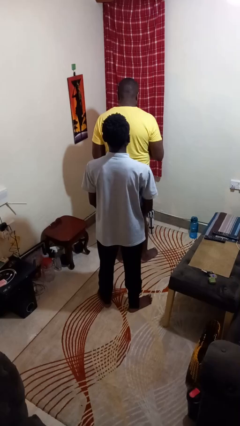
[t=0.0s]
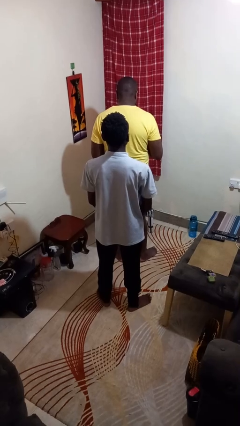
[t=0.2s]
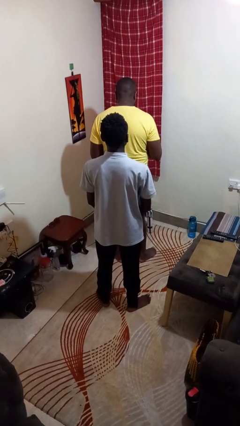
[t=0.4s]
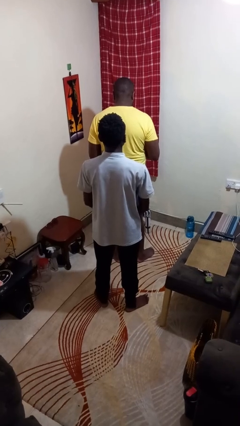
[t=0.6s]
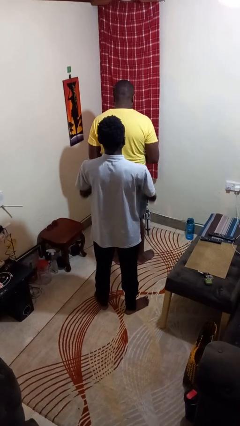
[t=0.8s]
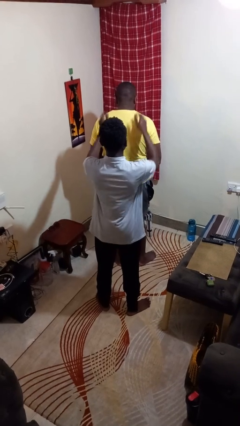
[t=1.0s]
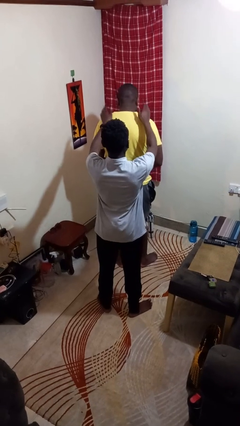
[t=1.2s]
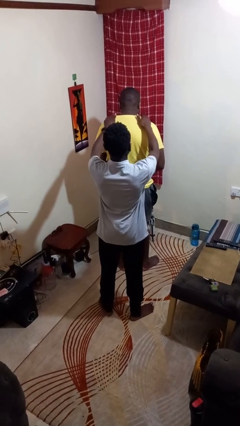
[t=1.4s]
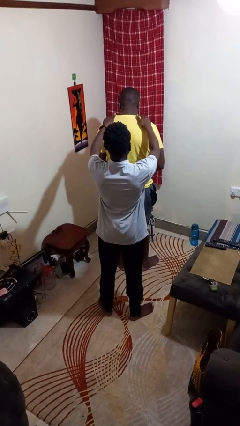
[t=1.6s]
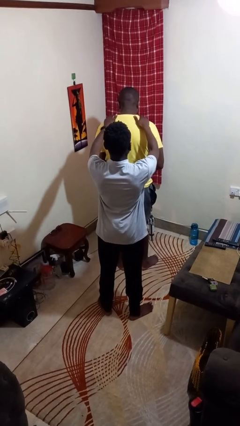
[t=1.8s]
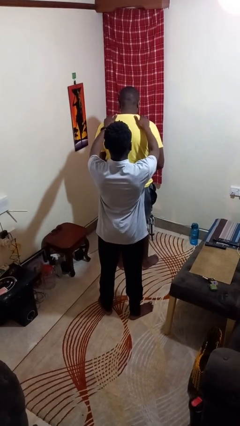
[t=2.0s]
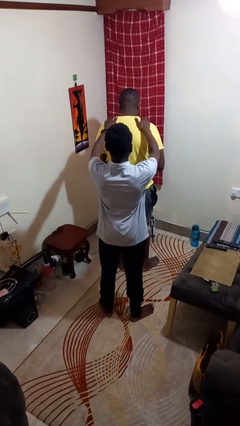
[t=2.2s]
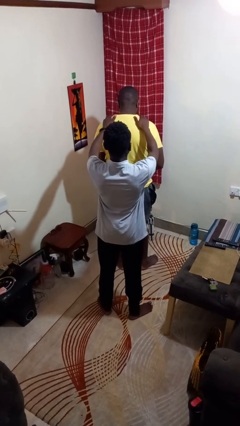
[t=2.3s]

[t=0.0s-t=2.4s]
person pounds shoulders of person

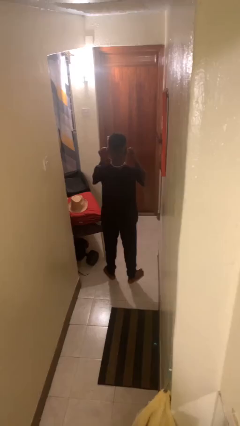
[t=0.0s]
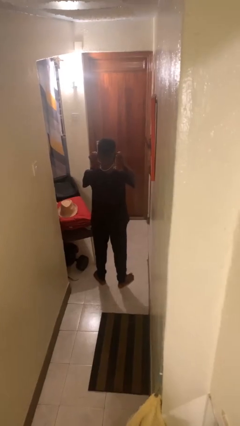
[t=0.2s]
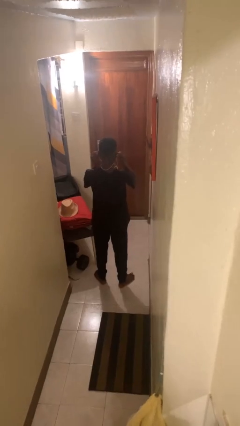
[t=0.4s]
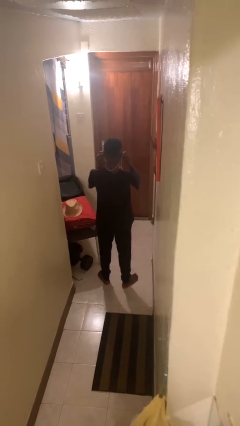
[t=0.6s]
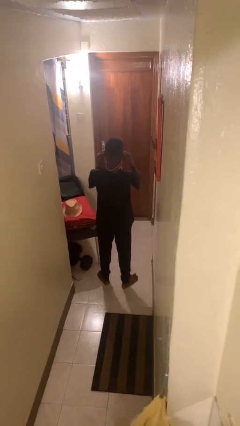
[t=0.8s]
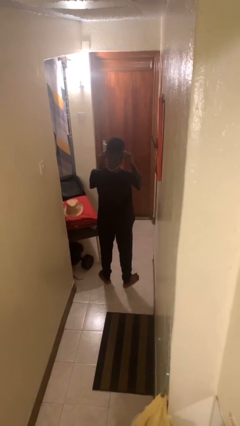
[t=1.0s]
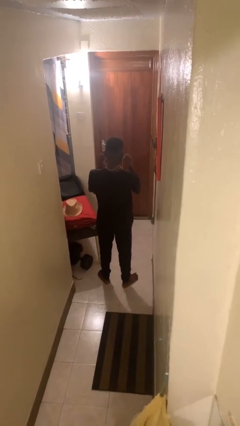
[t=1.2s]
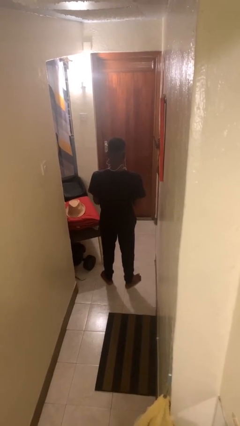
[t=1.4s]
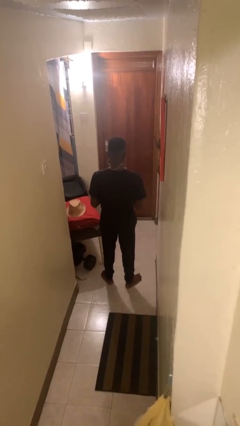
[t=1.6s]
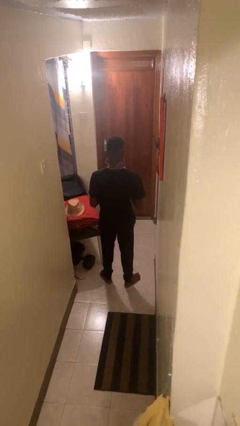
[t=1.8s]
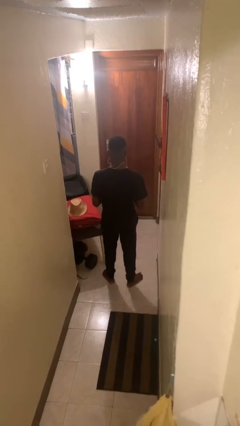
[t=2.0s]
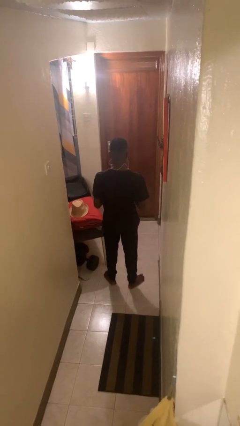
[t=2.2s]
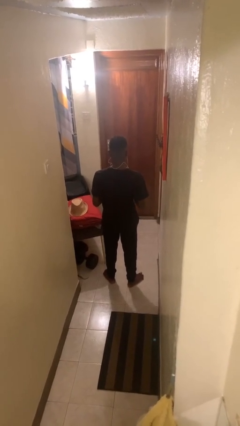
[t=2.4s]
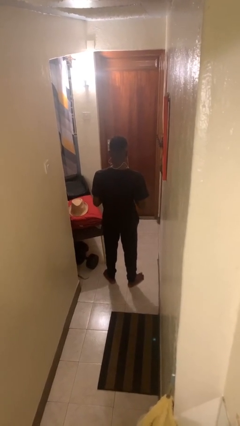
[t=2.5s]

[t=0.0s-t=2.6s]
person puts on headphones

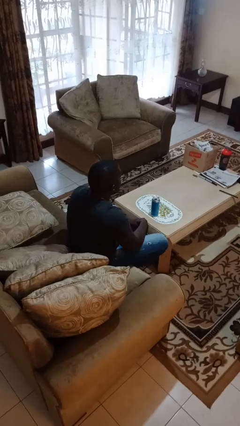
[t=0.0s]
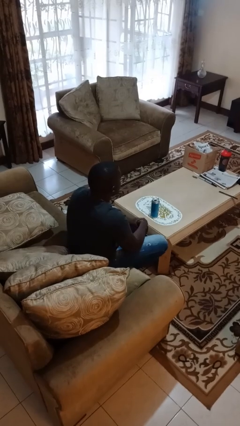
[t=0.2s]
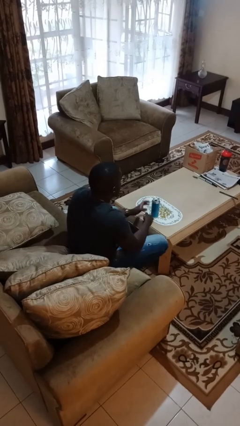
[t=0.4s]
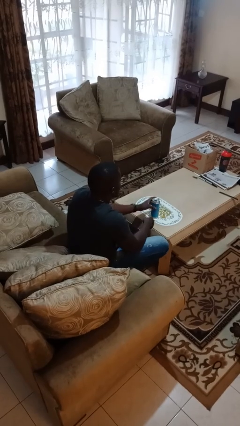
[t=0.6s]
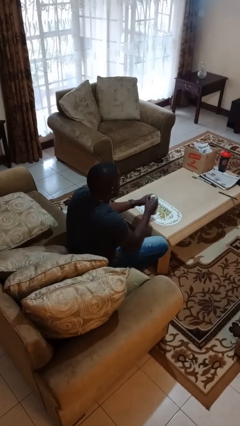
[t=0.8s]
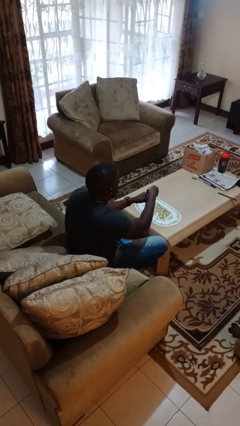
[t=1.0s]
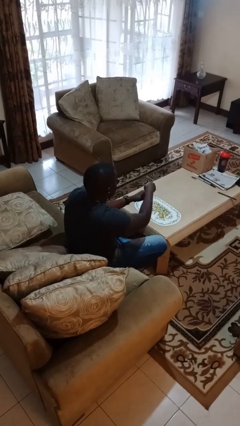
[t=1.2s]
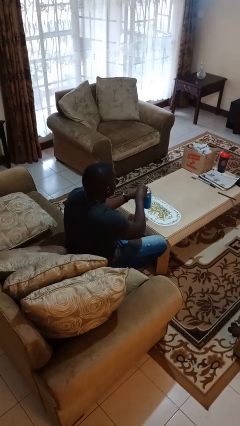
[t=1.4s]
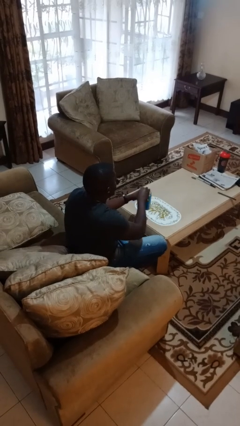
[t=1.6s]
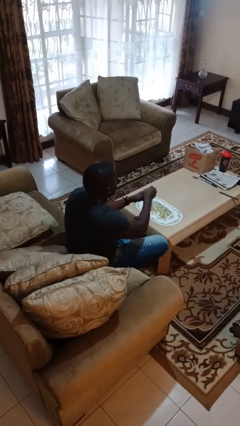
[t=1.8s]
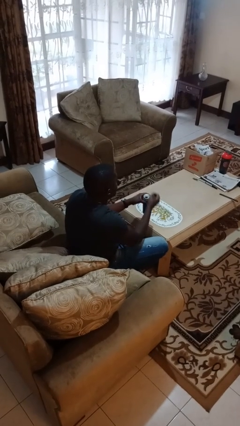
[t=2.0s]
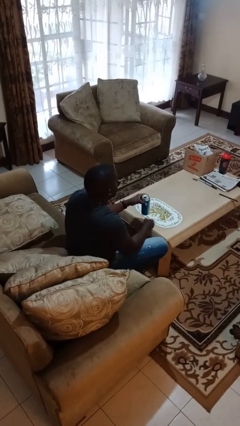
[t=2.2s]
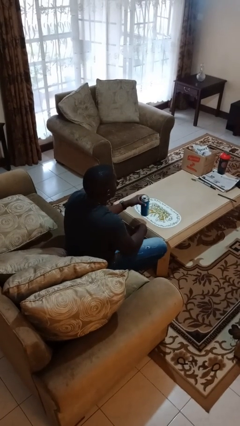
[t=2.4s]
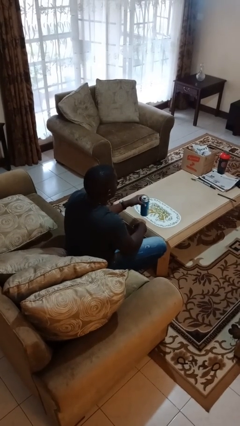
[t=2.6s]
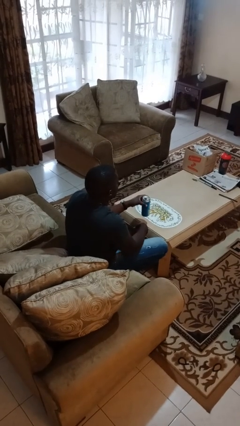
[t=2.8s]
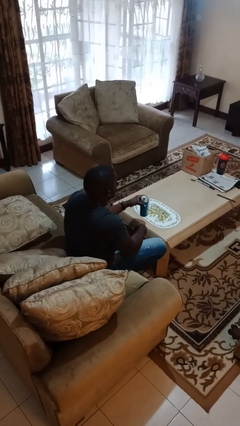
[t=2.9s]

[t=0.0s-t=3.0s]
person opens beverage can

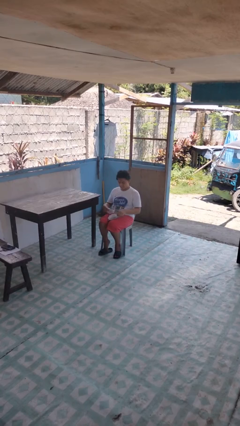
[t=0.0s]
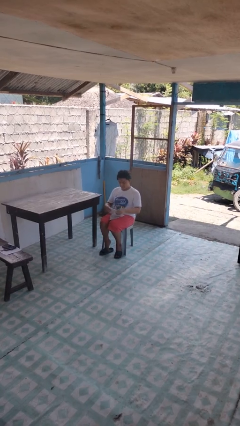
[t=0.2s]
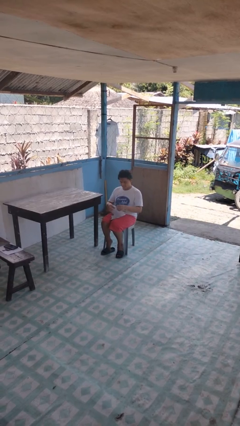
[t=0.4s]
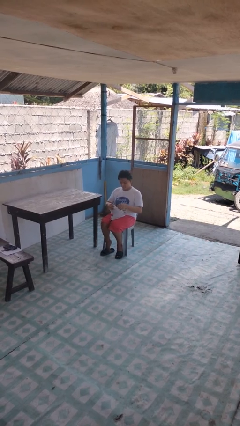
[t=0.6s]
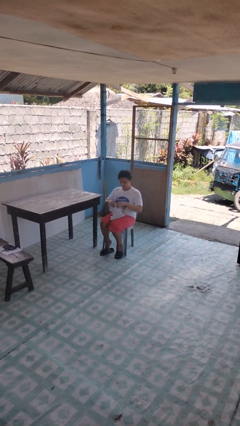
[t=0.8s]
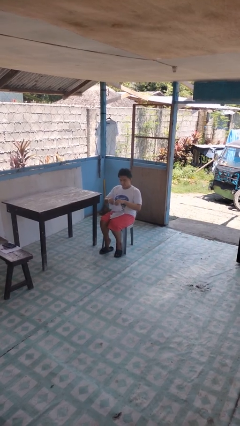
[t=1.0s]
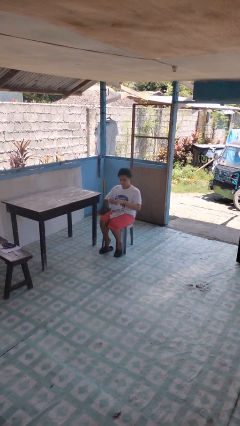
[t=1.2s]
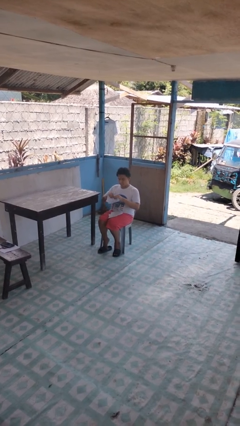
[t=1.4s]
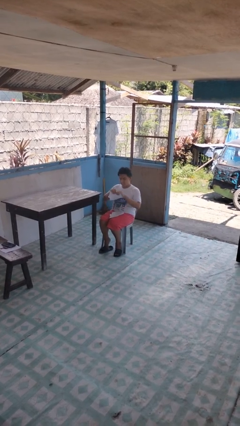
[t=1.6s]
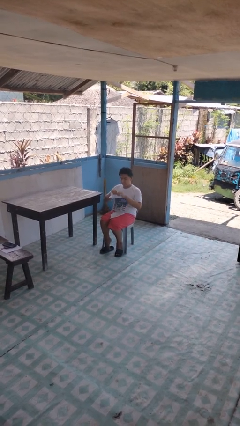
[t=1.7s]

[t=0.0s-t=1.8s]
person tears paper

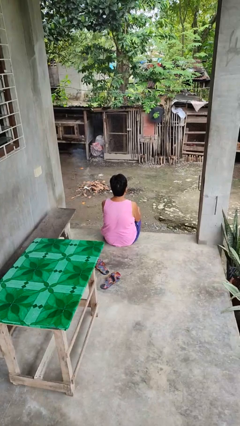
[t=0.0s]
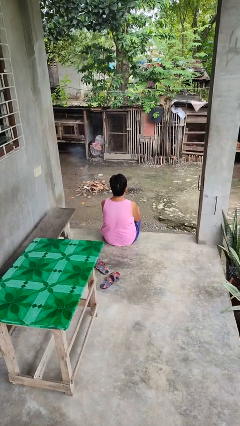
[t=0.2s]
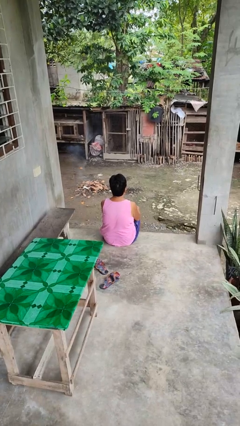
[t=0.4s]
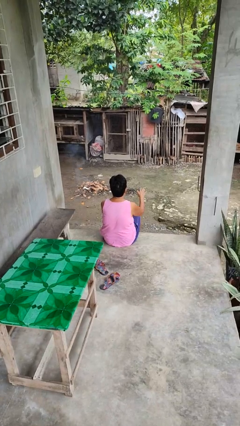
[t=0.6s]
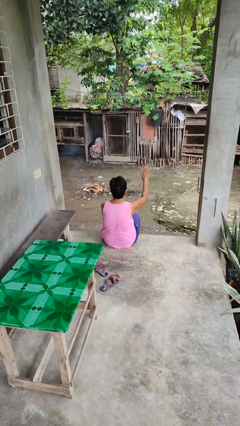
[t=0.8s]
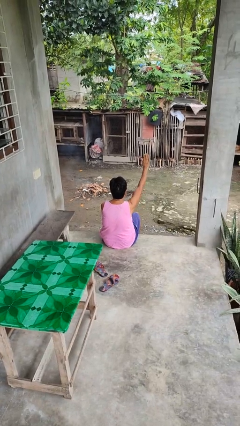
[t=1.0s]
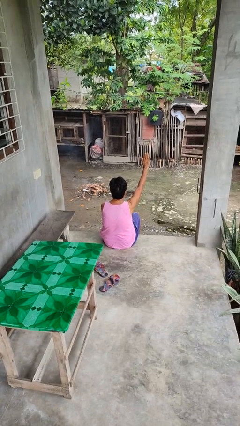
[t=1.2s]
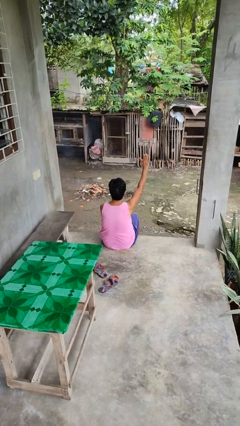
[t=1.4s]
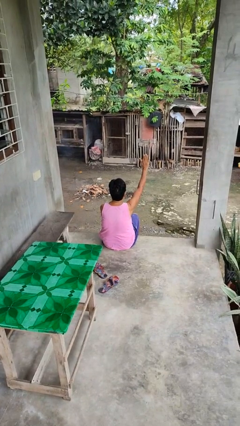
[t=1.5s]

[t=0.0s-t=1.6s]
person gestures raise hand

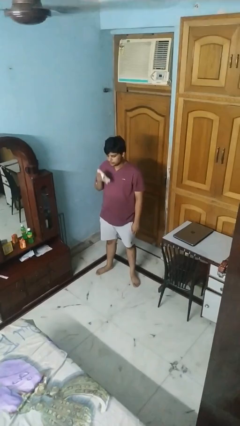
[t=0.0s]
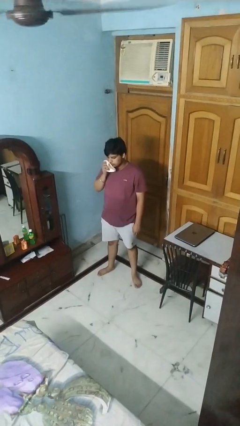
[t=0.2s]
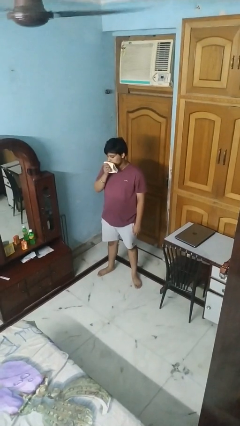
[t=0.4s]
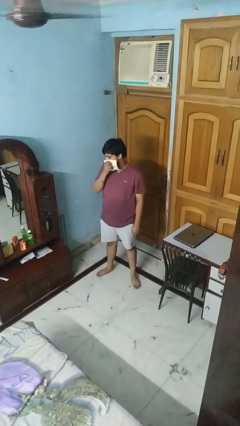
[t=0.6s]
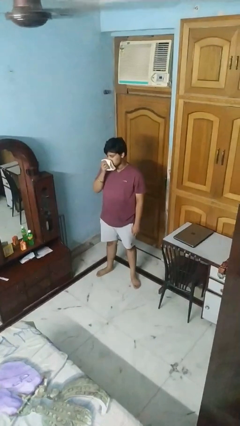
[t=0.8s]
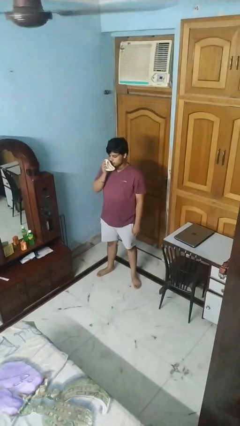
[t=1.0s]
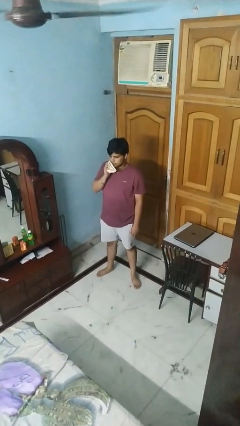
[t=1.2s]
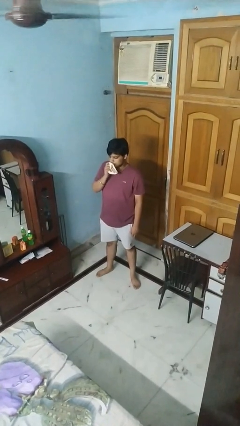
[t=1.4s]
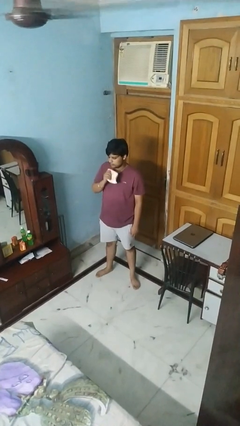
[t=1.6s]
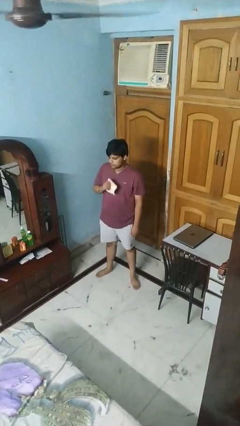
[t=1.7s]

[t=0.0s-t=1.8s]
person wipes mouth with napkin

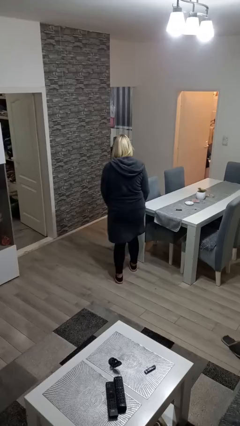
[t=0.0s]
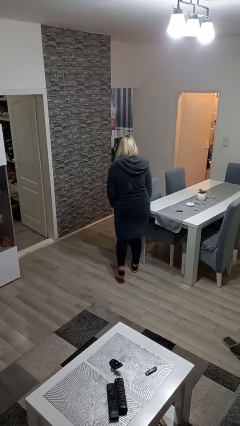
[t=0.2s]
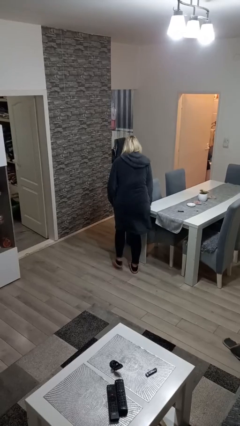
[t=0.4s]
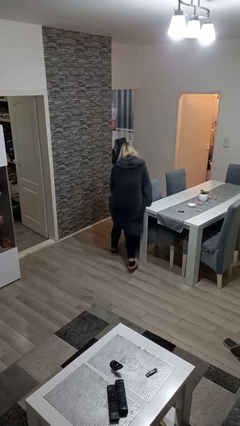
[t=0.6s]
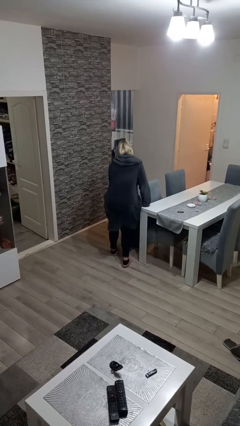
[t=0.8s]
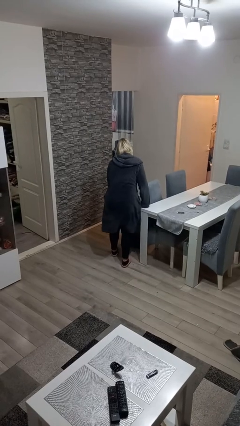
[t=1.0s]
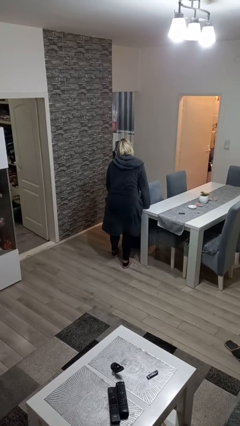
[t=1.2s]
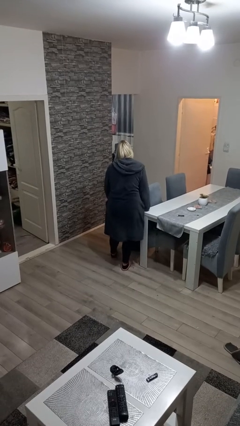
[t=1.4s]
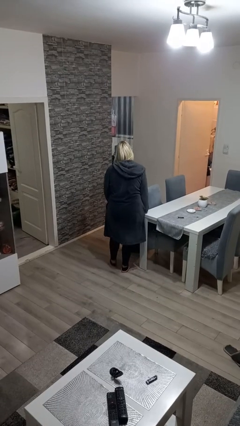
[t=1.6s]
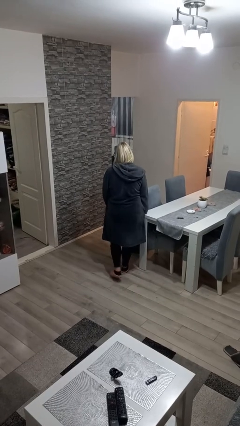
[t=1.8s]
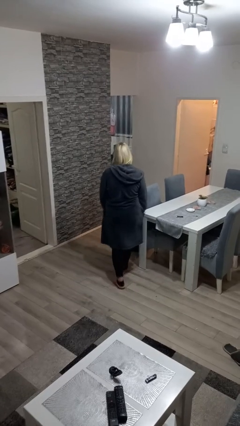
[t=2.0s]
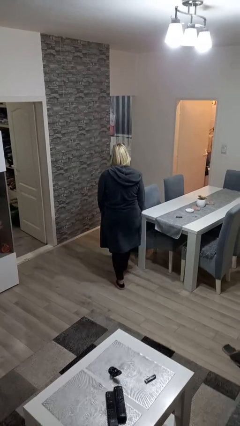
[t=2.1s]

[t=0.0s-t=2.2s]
person bumps into table

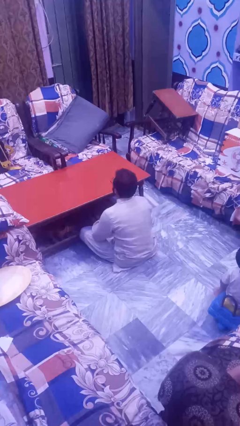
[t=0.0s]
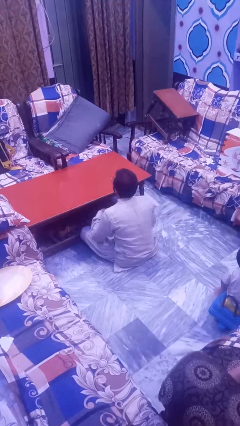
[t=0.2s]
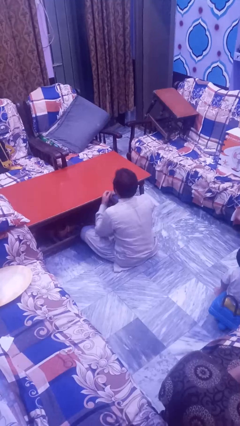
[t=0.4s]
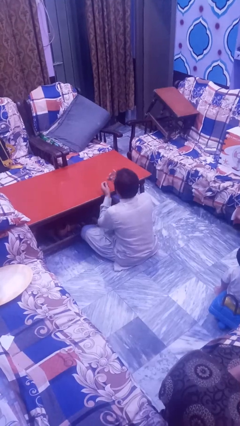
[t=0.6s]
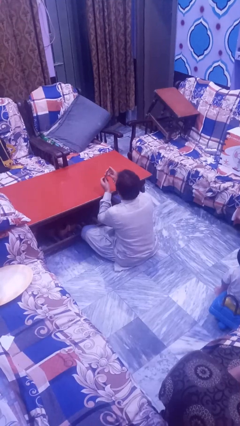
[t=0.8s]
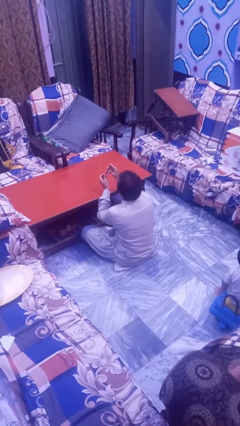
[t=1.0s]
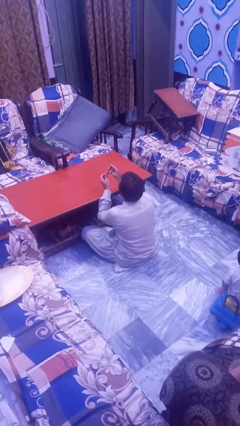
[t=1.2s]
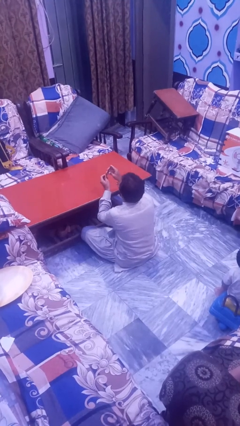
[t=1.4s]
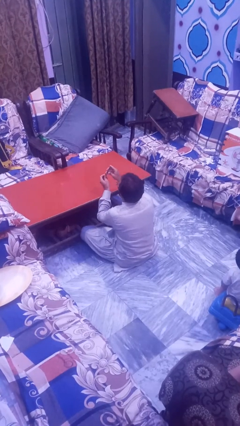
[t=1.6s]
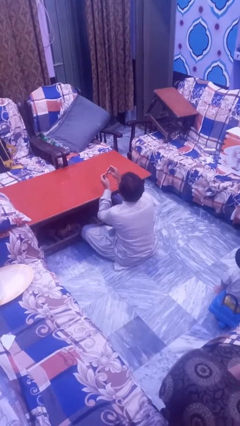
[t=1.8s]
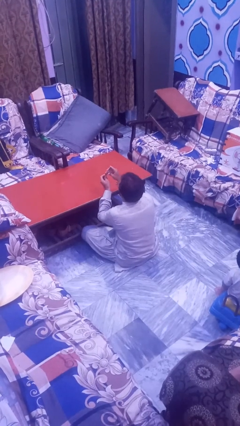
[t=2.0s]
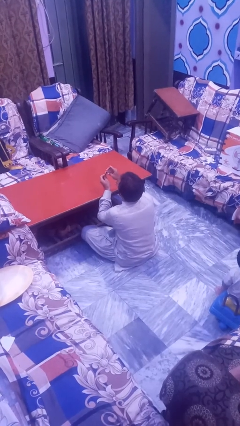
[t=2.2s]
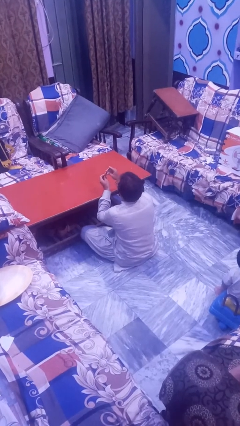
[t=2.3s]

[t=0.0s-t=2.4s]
person clips fingernails
